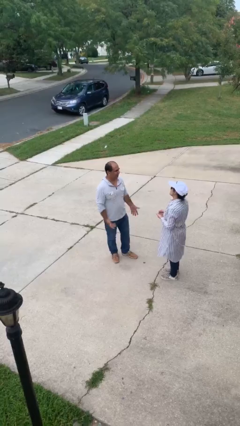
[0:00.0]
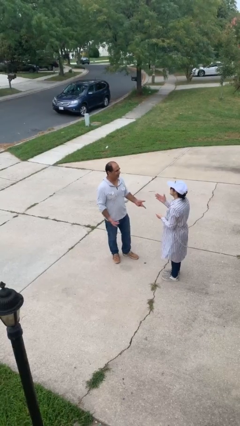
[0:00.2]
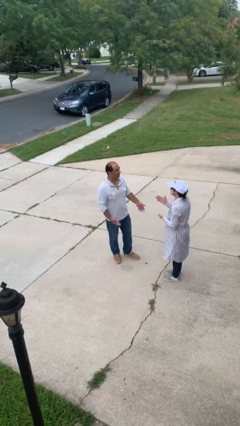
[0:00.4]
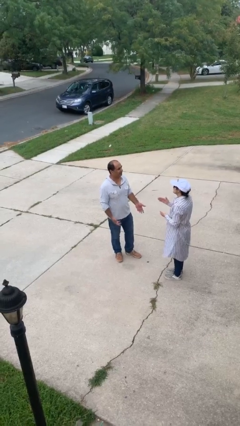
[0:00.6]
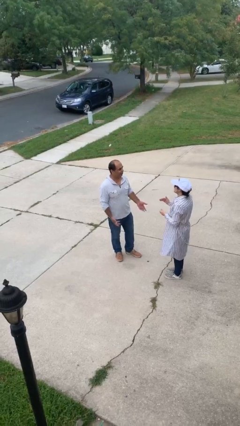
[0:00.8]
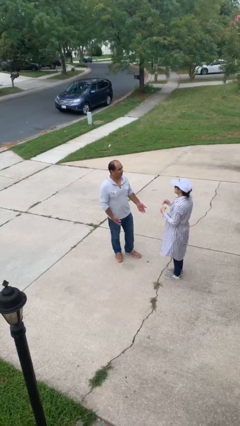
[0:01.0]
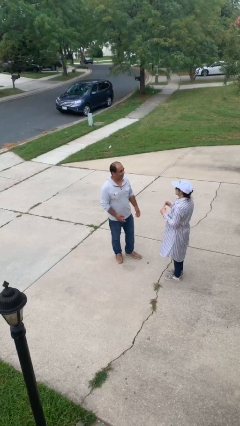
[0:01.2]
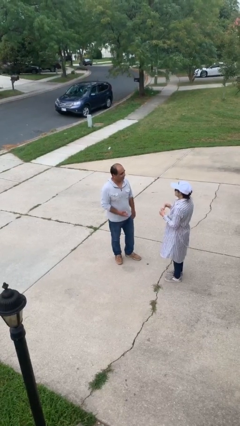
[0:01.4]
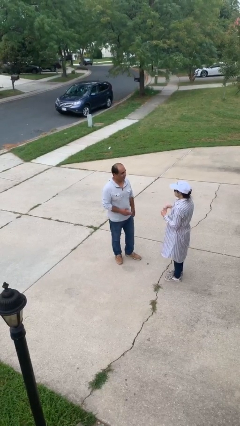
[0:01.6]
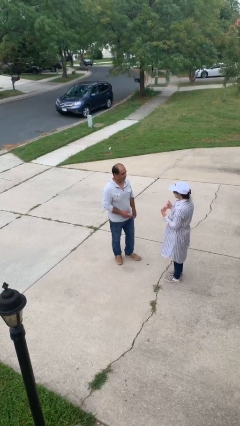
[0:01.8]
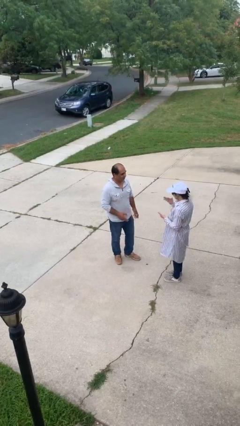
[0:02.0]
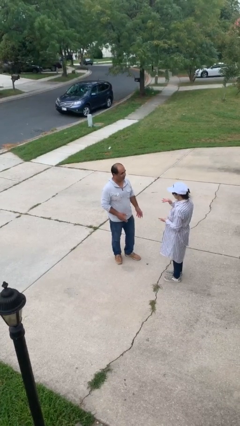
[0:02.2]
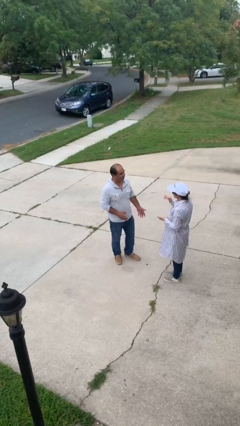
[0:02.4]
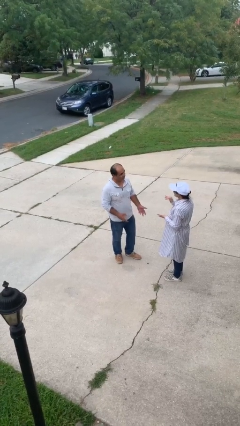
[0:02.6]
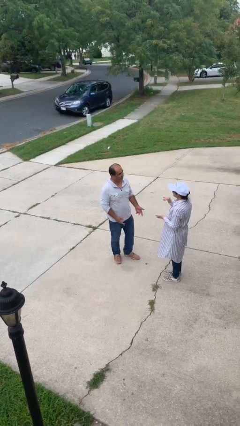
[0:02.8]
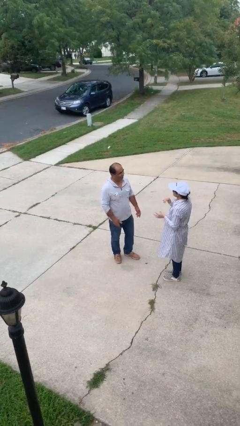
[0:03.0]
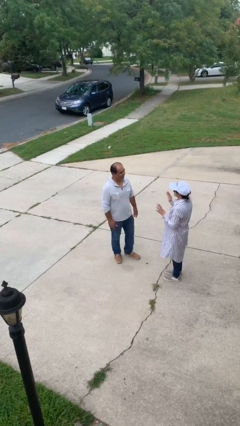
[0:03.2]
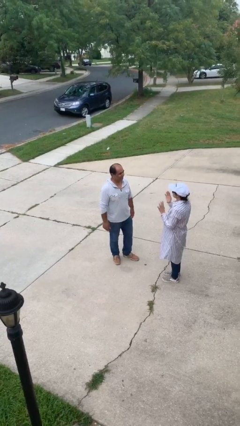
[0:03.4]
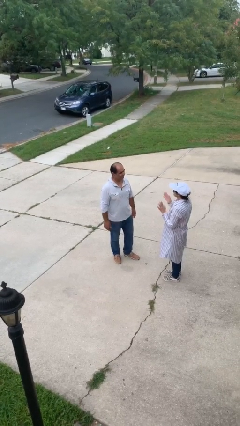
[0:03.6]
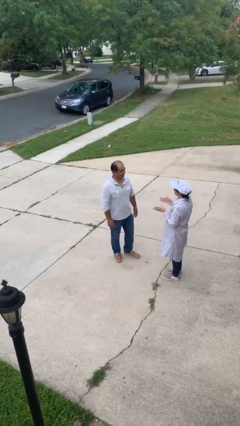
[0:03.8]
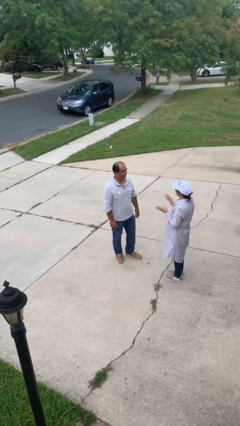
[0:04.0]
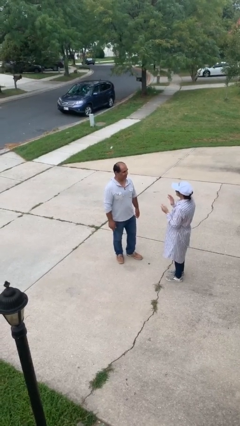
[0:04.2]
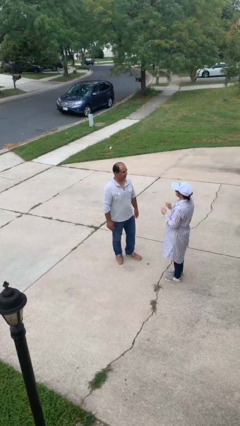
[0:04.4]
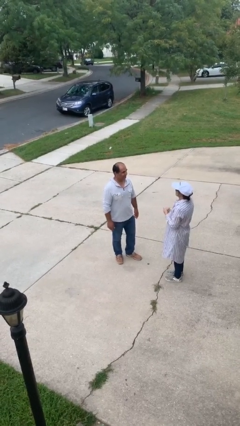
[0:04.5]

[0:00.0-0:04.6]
person talks to person

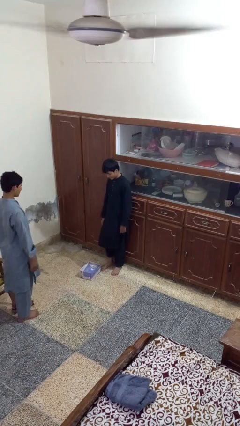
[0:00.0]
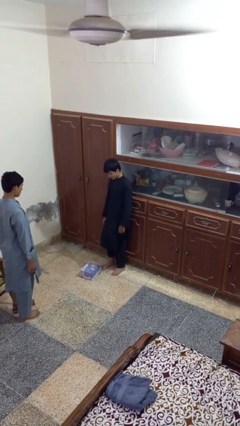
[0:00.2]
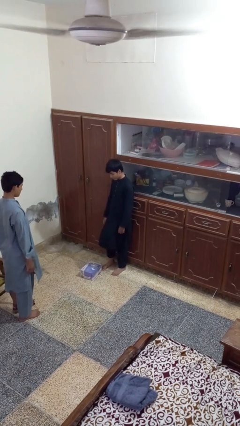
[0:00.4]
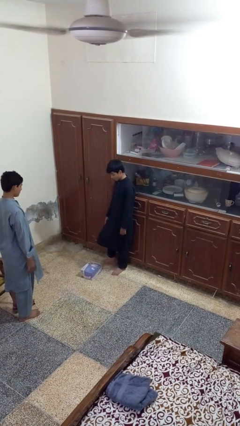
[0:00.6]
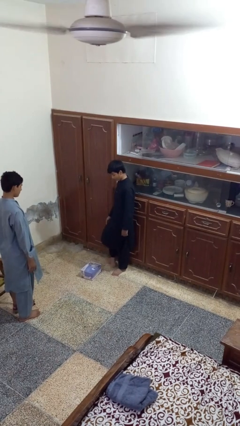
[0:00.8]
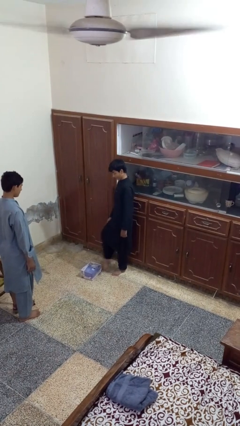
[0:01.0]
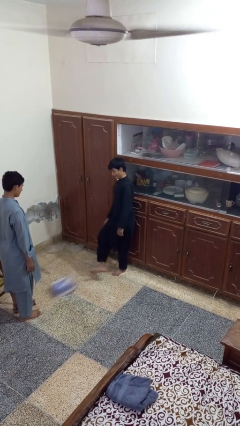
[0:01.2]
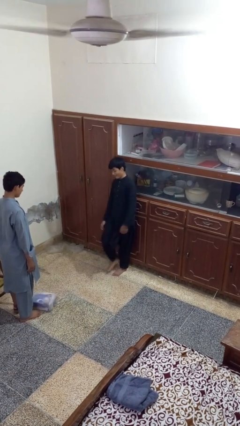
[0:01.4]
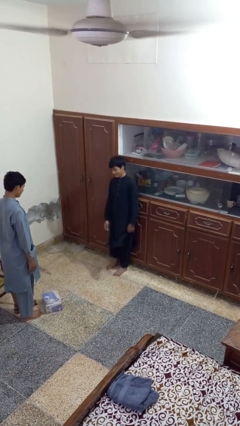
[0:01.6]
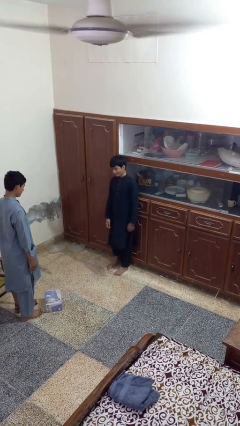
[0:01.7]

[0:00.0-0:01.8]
person kicks object to person

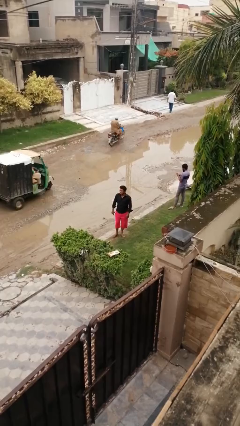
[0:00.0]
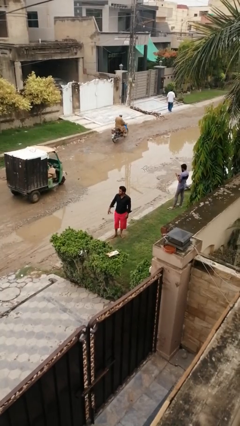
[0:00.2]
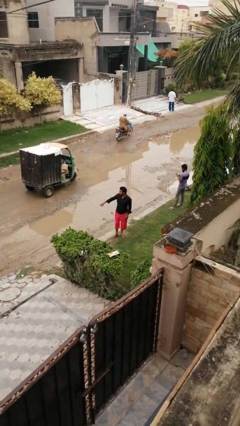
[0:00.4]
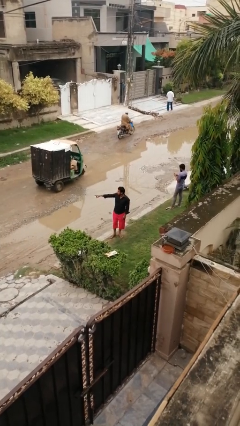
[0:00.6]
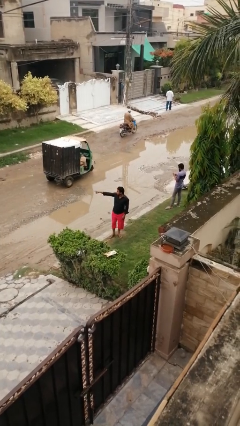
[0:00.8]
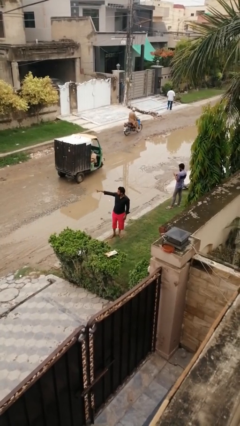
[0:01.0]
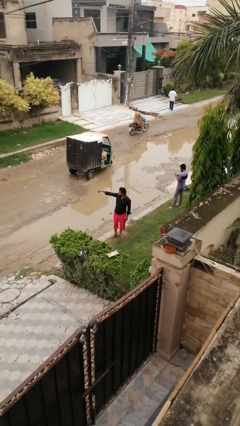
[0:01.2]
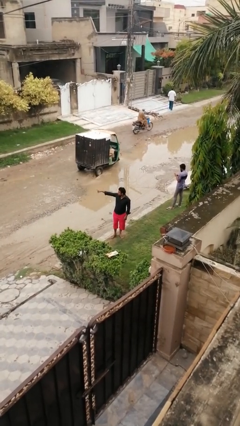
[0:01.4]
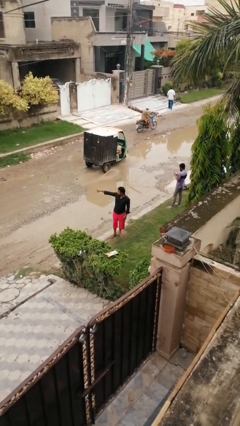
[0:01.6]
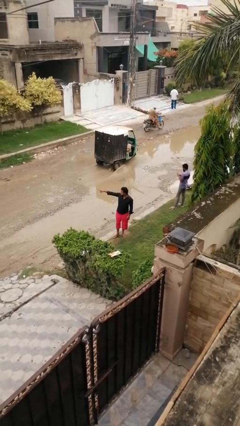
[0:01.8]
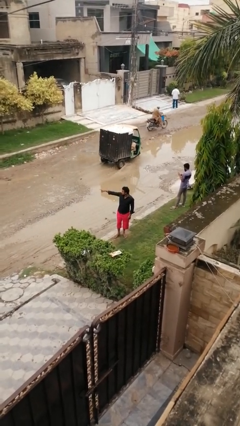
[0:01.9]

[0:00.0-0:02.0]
person points at person

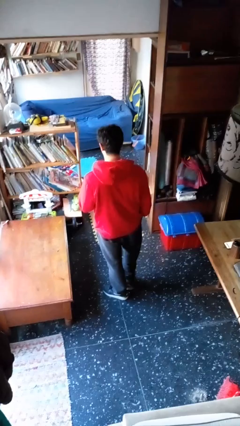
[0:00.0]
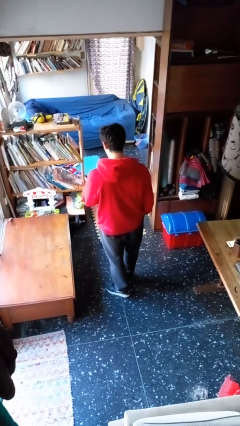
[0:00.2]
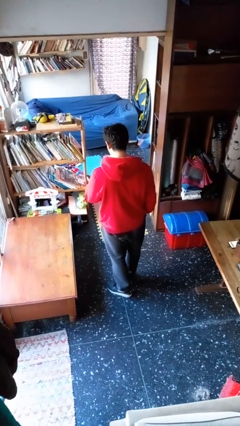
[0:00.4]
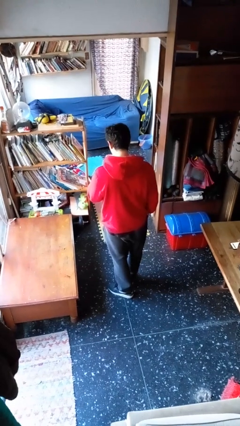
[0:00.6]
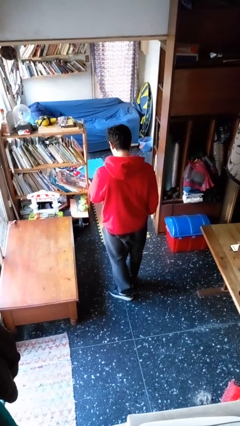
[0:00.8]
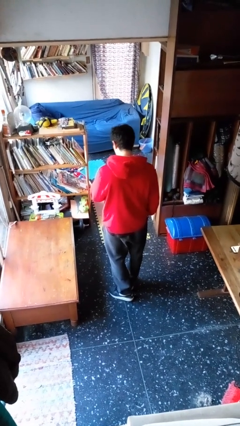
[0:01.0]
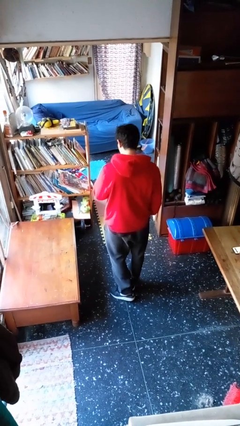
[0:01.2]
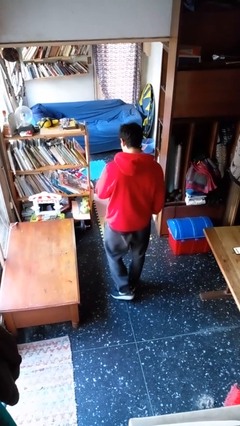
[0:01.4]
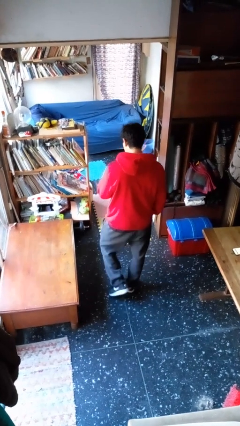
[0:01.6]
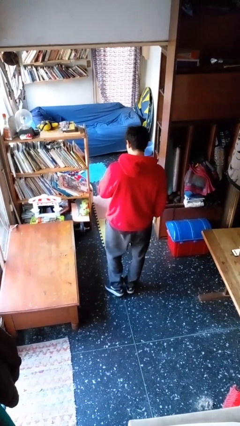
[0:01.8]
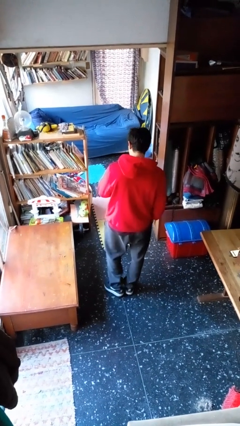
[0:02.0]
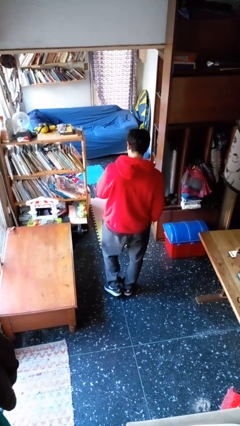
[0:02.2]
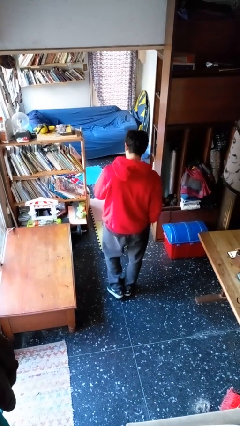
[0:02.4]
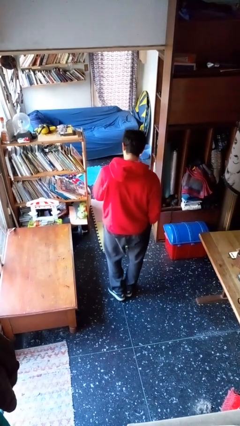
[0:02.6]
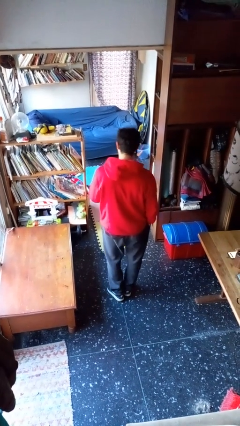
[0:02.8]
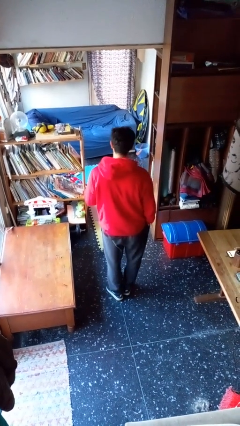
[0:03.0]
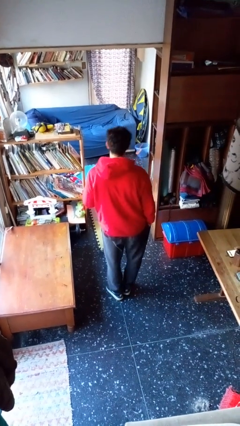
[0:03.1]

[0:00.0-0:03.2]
person drinks from straw

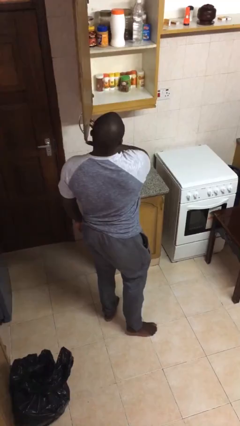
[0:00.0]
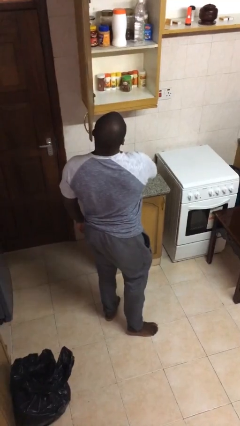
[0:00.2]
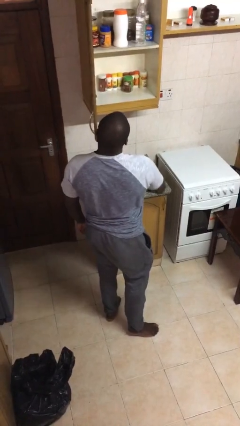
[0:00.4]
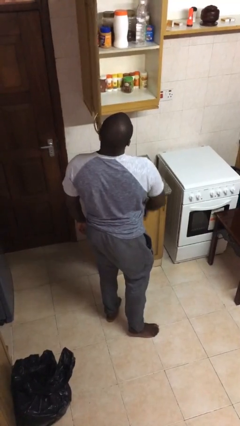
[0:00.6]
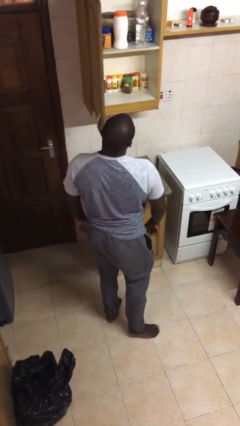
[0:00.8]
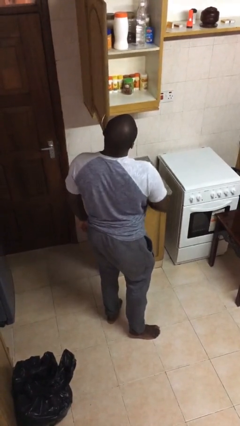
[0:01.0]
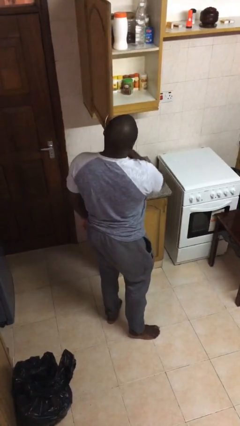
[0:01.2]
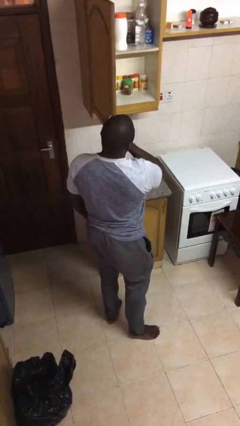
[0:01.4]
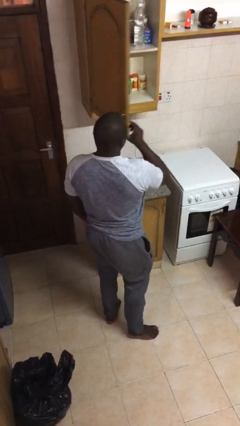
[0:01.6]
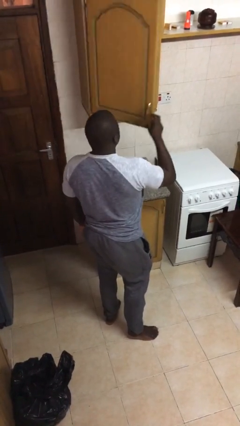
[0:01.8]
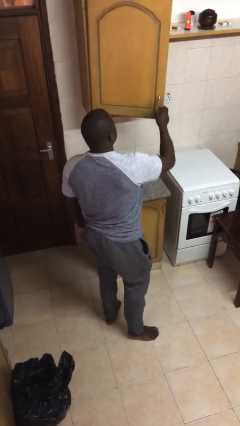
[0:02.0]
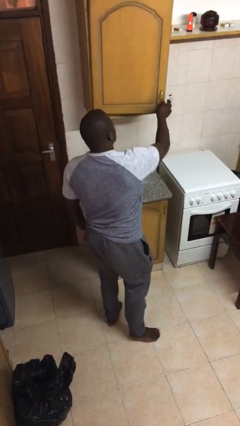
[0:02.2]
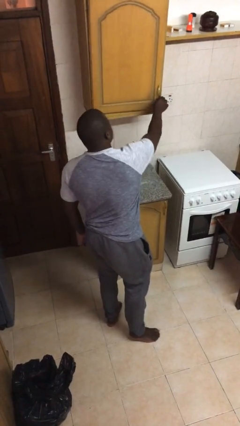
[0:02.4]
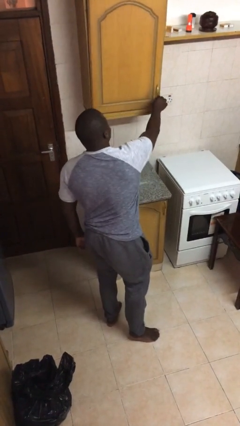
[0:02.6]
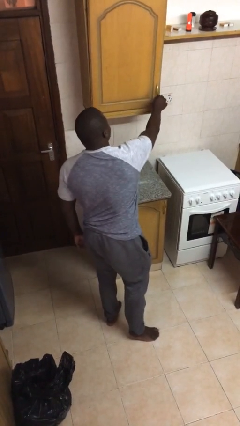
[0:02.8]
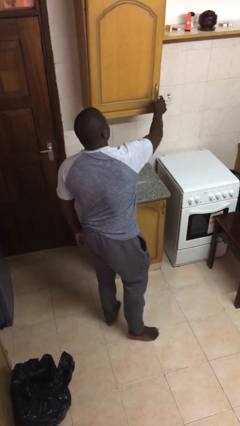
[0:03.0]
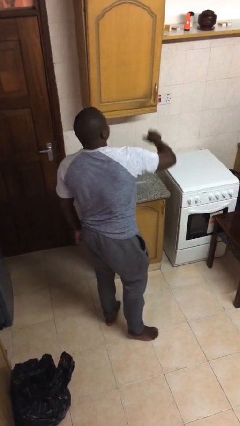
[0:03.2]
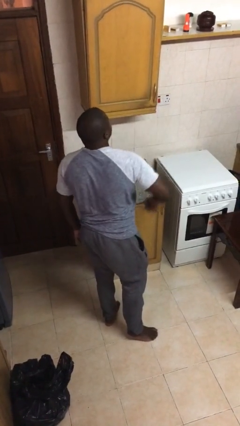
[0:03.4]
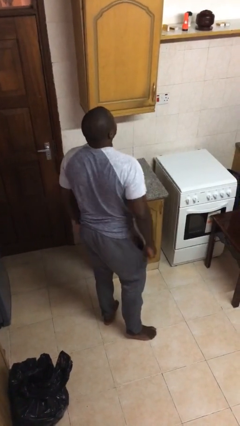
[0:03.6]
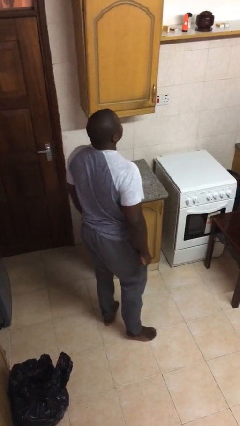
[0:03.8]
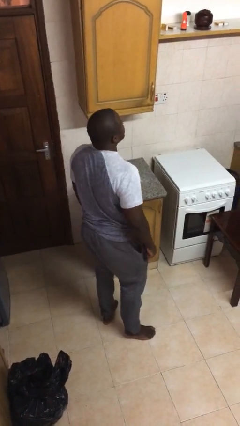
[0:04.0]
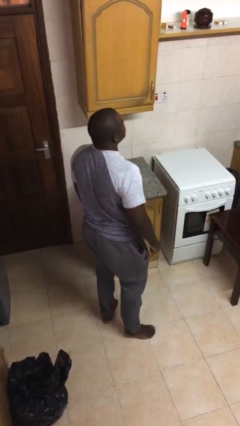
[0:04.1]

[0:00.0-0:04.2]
person closes cabinet

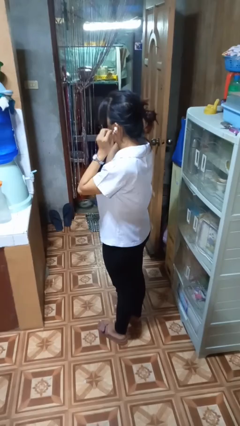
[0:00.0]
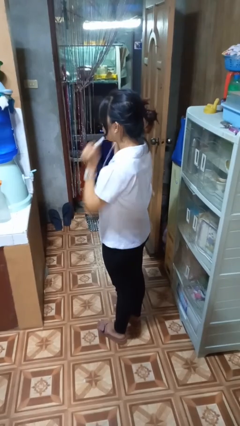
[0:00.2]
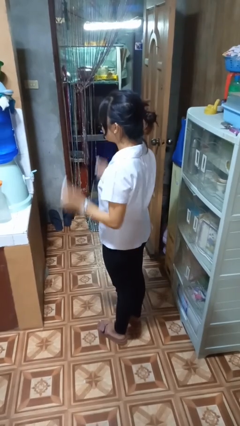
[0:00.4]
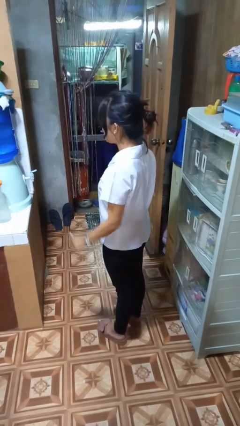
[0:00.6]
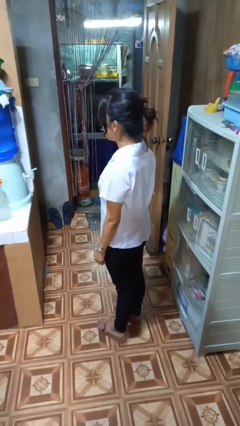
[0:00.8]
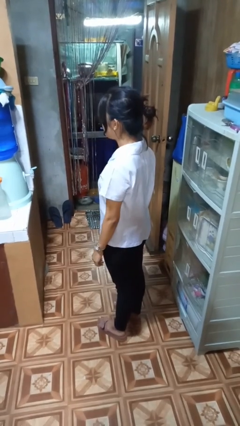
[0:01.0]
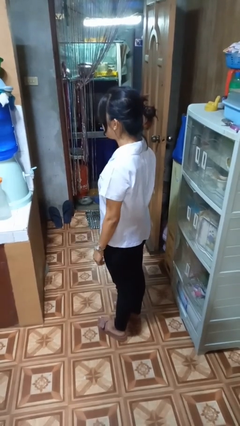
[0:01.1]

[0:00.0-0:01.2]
person takes off headphones

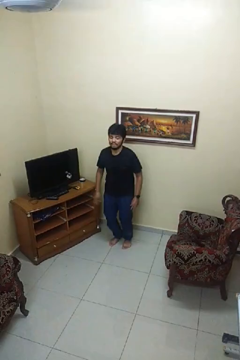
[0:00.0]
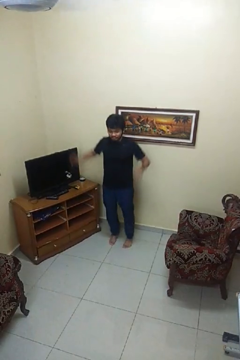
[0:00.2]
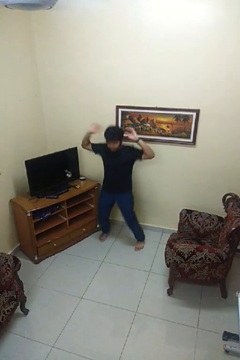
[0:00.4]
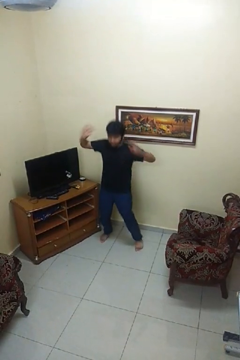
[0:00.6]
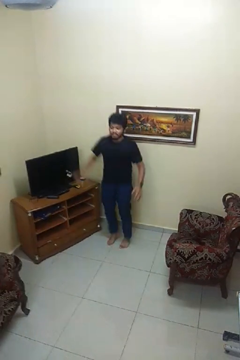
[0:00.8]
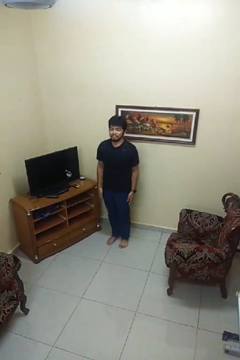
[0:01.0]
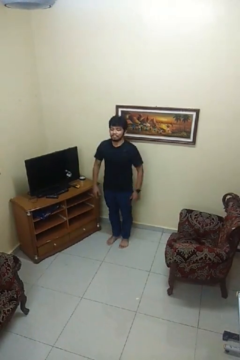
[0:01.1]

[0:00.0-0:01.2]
person exercises with jumping jacks
